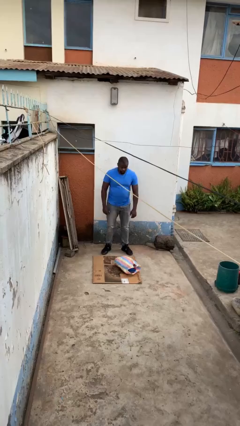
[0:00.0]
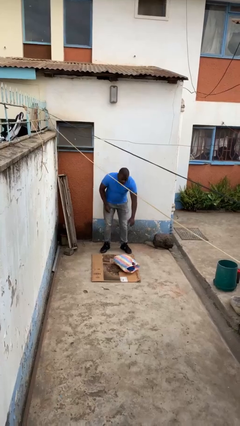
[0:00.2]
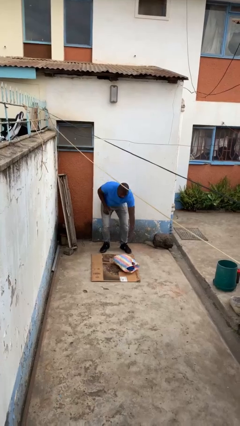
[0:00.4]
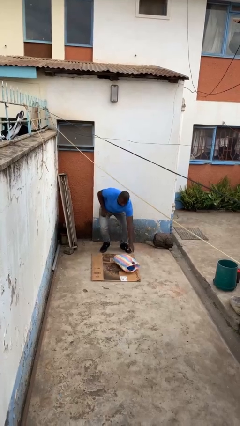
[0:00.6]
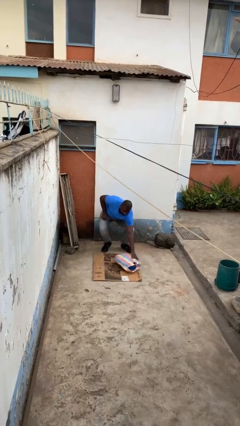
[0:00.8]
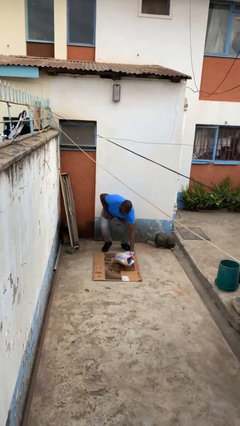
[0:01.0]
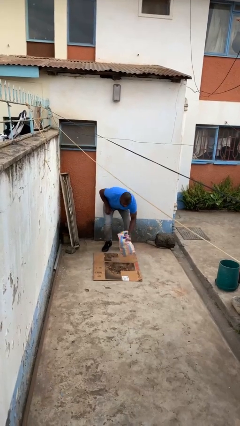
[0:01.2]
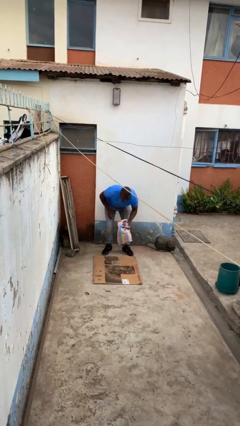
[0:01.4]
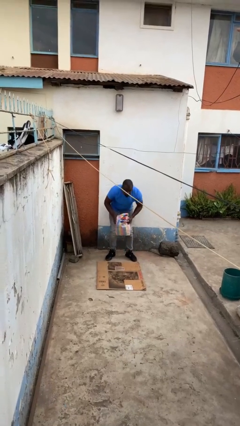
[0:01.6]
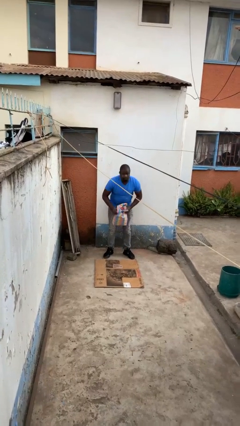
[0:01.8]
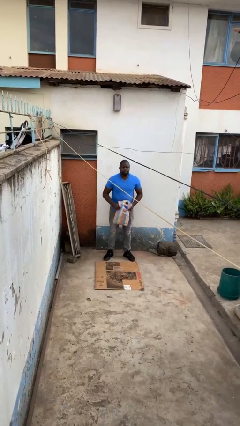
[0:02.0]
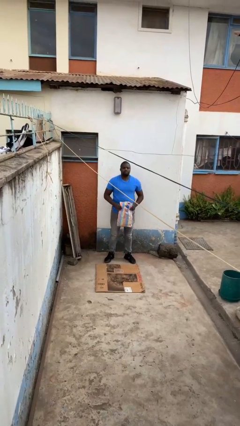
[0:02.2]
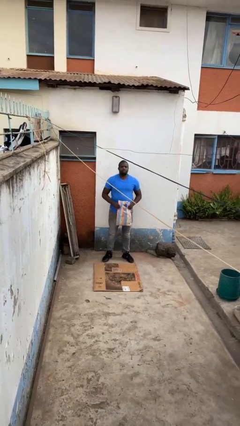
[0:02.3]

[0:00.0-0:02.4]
person picks up object from floor

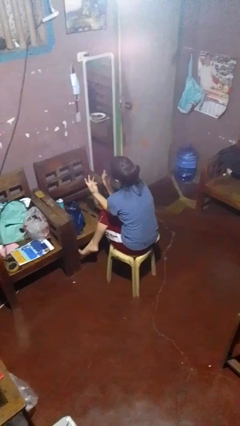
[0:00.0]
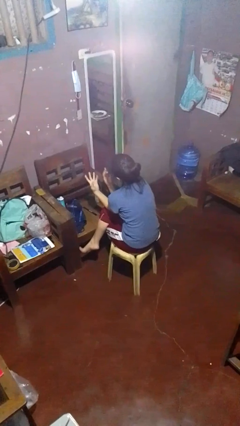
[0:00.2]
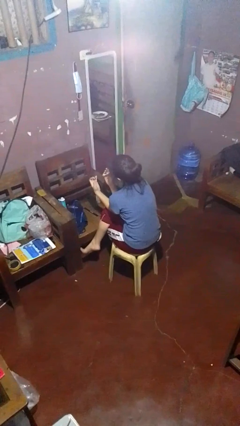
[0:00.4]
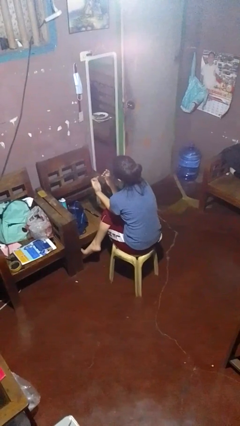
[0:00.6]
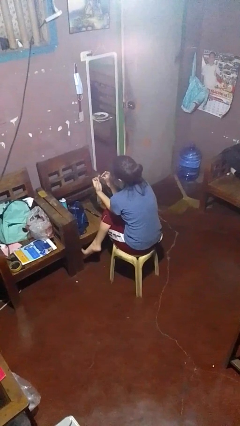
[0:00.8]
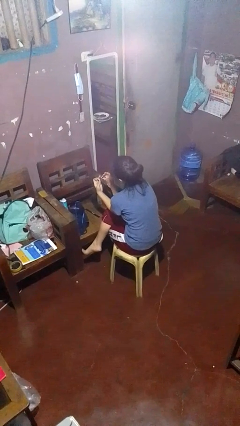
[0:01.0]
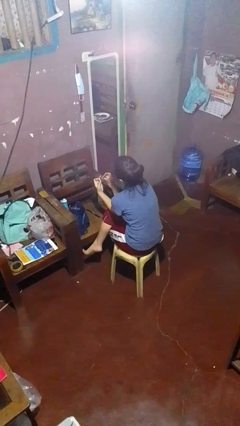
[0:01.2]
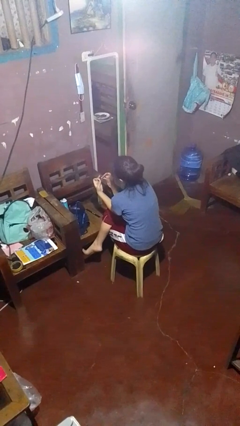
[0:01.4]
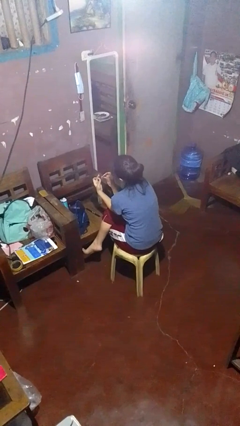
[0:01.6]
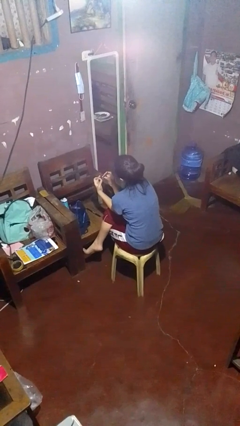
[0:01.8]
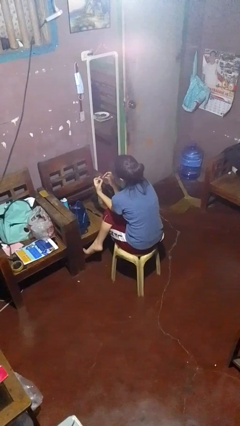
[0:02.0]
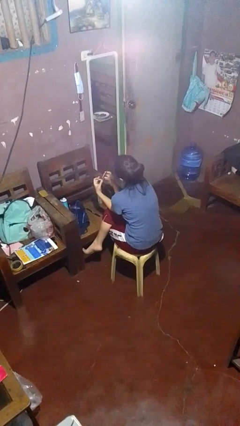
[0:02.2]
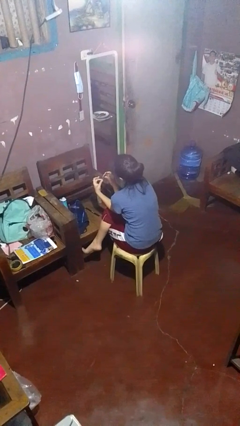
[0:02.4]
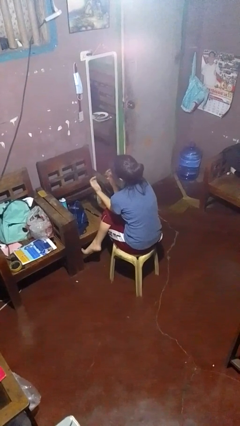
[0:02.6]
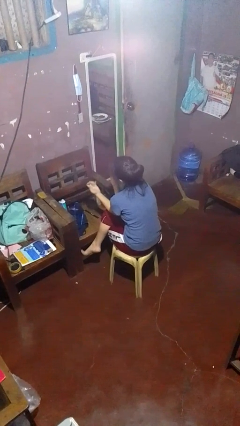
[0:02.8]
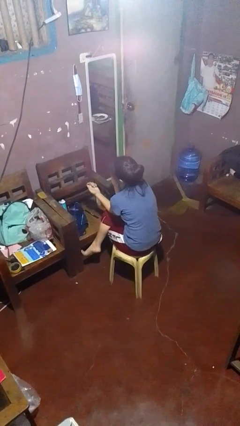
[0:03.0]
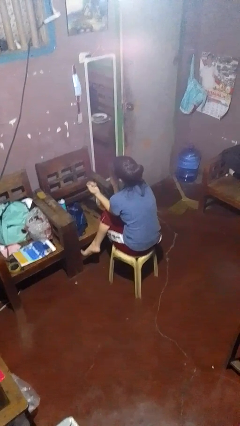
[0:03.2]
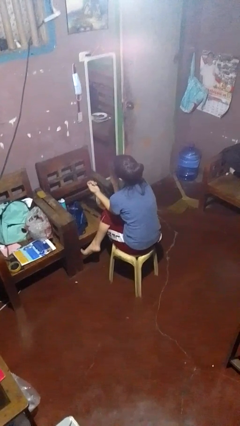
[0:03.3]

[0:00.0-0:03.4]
person clips fingernails

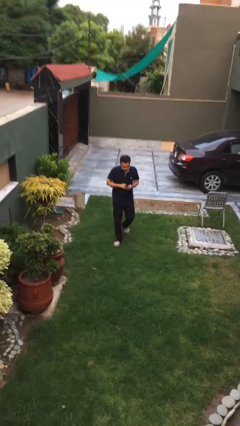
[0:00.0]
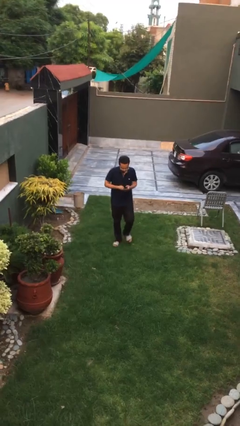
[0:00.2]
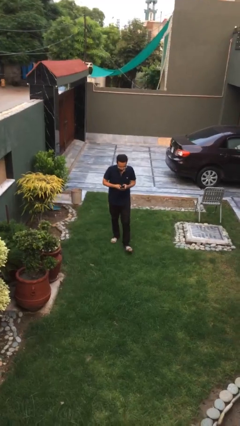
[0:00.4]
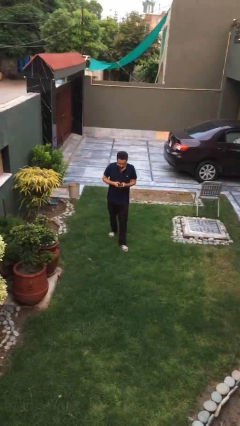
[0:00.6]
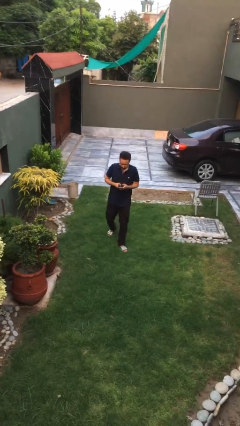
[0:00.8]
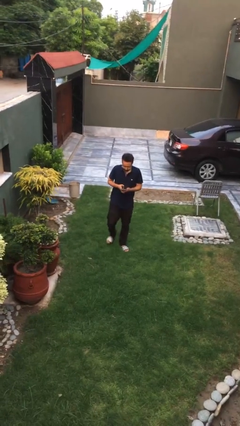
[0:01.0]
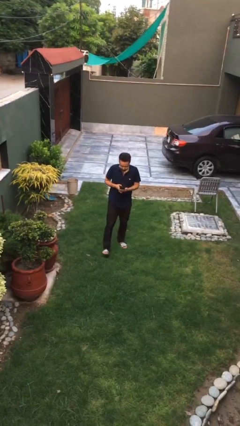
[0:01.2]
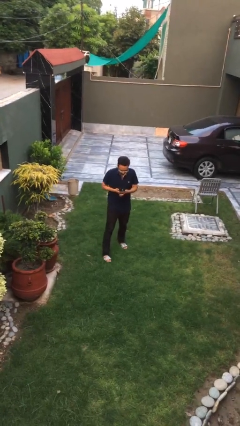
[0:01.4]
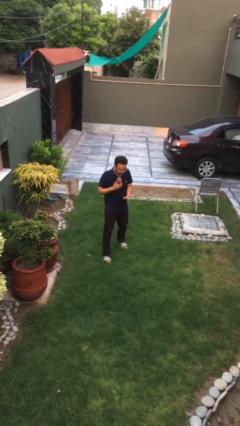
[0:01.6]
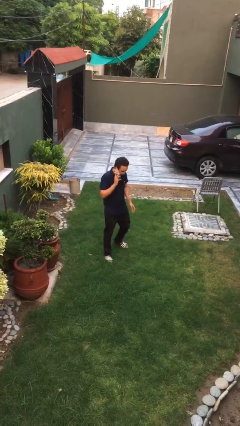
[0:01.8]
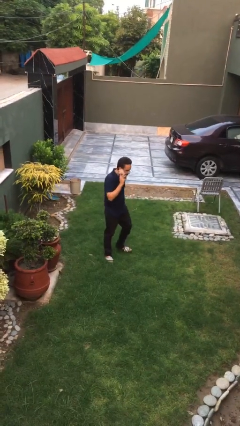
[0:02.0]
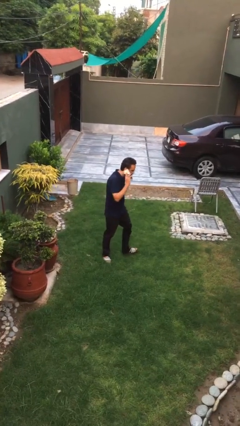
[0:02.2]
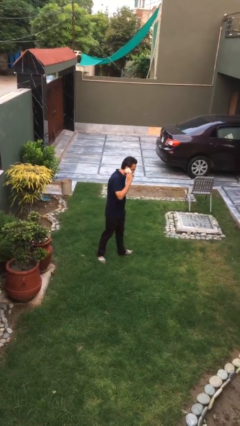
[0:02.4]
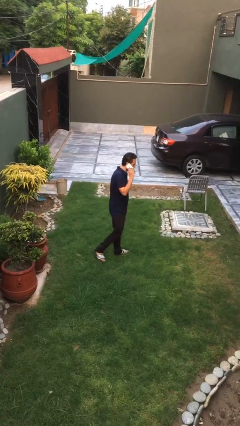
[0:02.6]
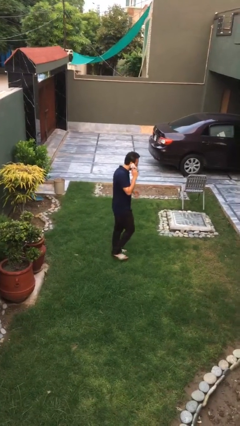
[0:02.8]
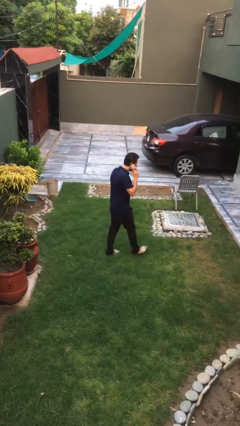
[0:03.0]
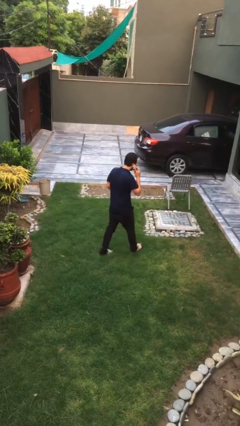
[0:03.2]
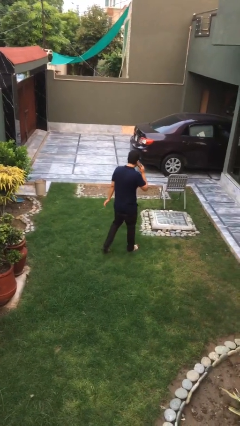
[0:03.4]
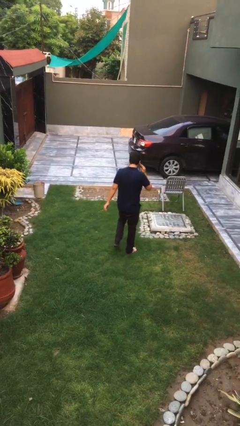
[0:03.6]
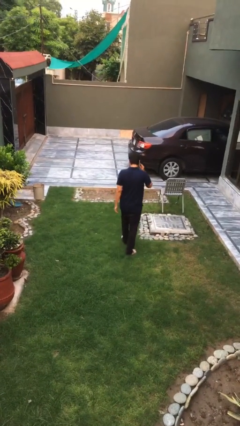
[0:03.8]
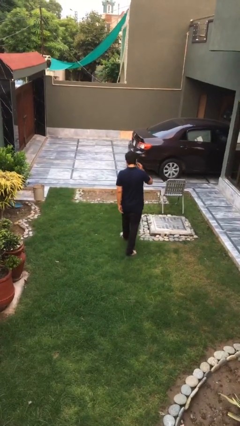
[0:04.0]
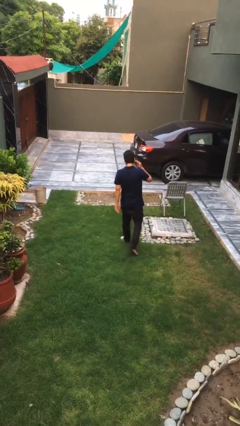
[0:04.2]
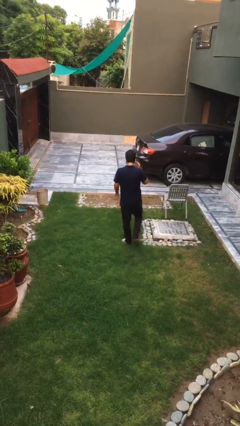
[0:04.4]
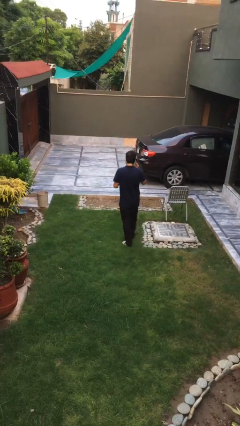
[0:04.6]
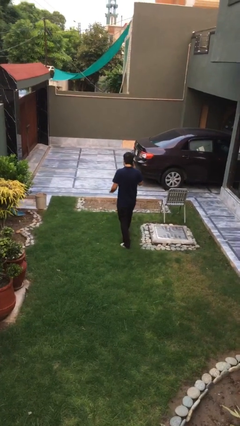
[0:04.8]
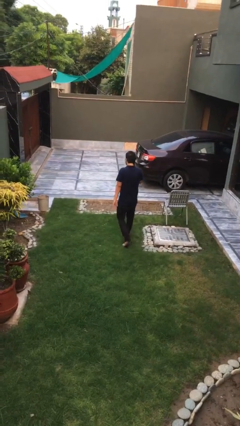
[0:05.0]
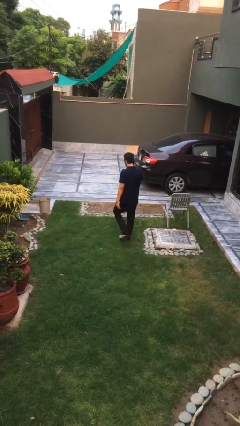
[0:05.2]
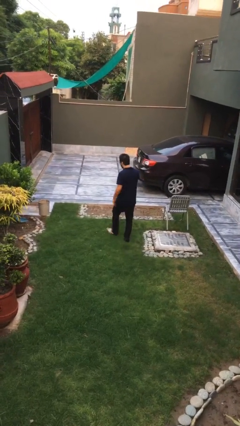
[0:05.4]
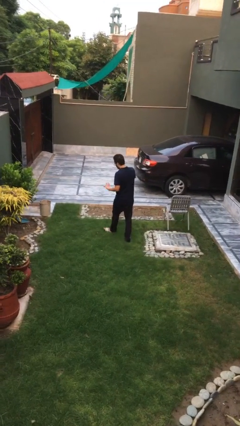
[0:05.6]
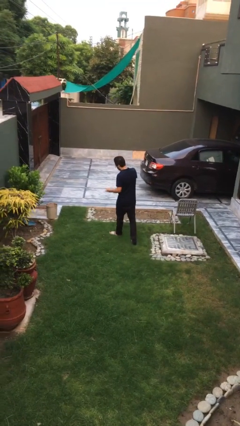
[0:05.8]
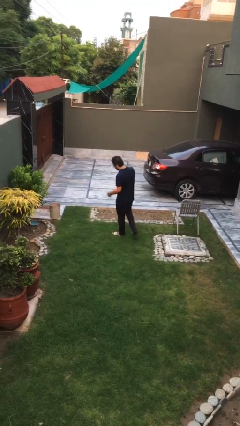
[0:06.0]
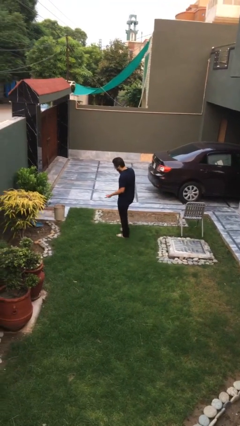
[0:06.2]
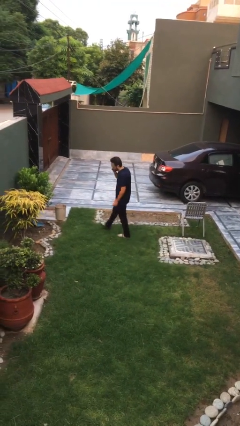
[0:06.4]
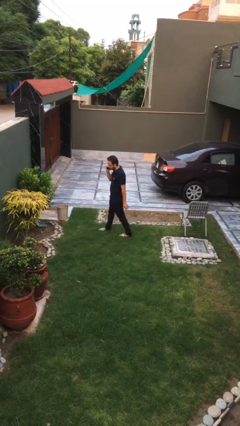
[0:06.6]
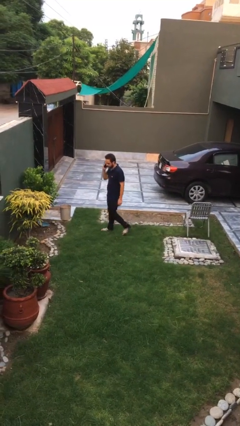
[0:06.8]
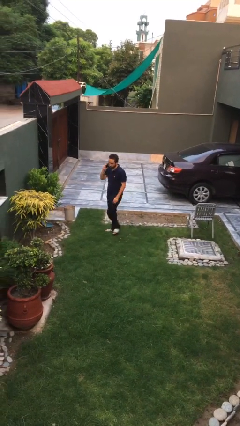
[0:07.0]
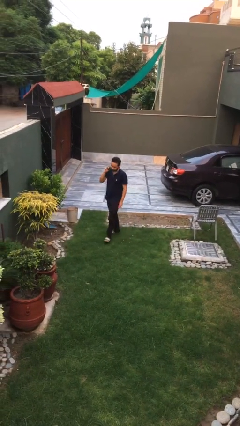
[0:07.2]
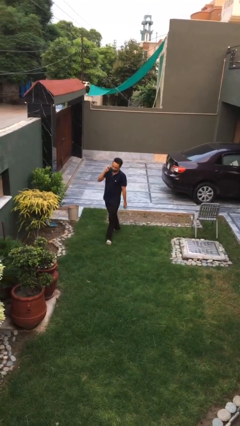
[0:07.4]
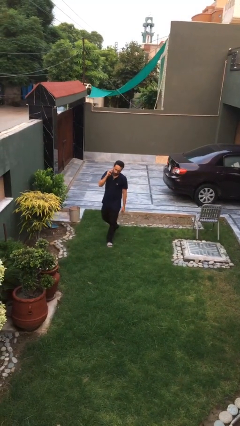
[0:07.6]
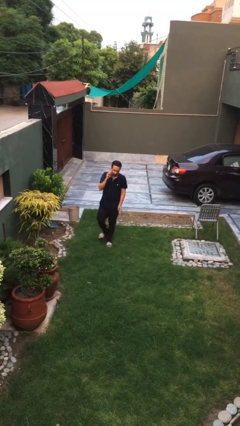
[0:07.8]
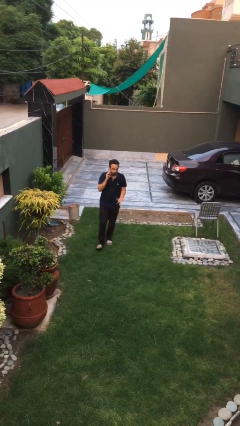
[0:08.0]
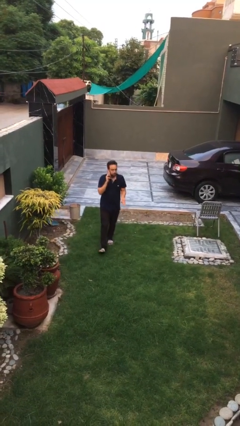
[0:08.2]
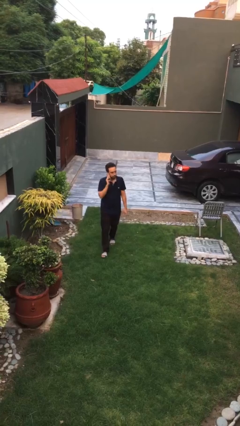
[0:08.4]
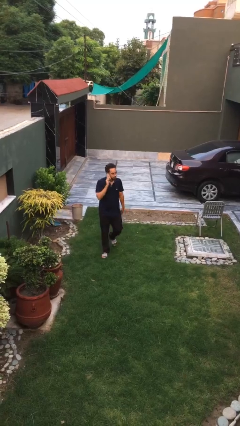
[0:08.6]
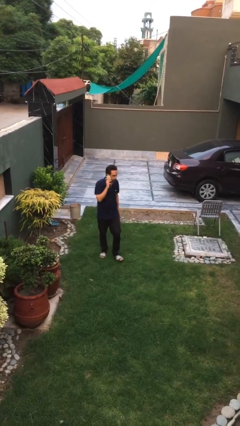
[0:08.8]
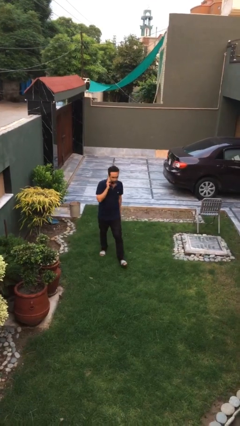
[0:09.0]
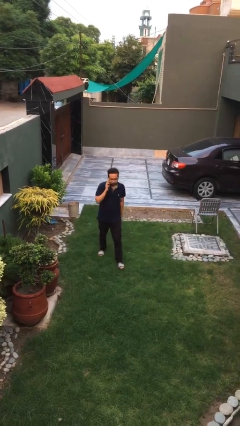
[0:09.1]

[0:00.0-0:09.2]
person talks on phone

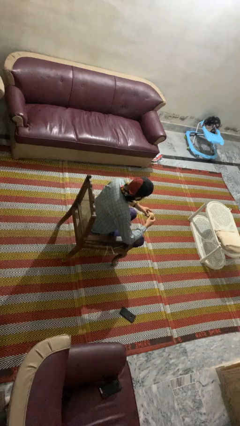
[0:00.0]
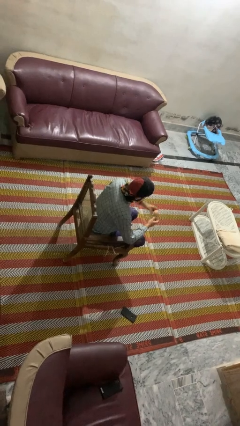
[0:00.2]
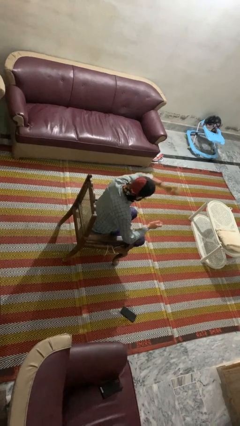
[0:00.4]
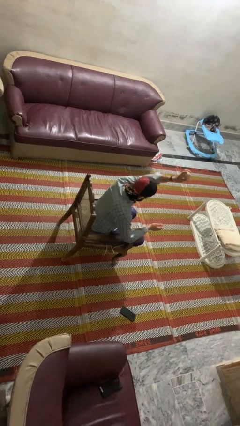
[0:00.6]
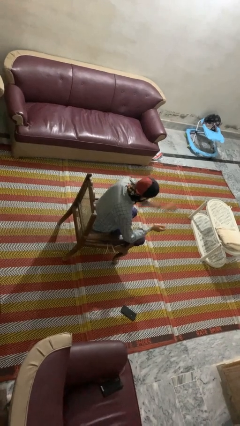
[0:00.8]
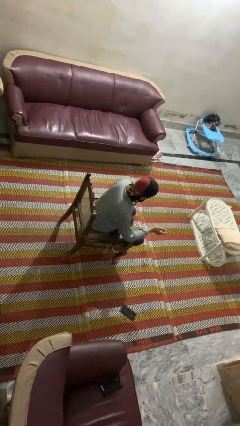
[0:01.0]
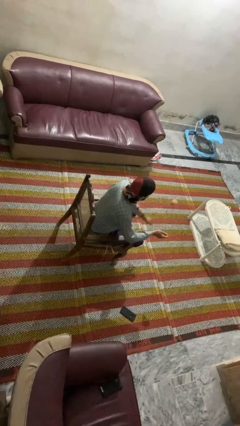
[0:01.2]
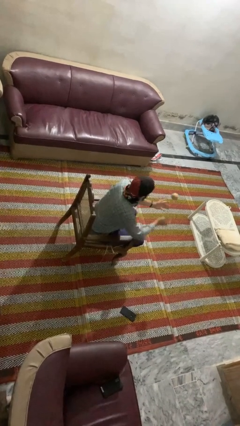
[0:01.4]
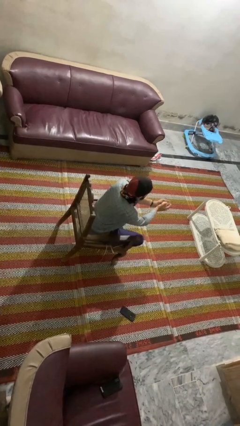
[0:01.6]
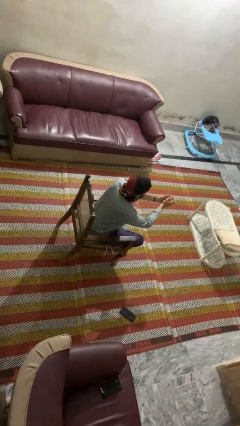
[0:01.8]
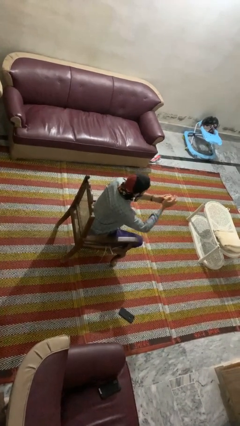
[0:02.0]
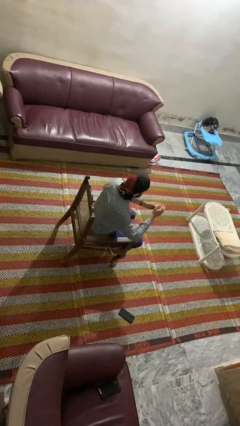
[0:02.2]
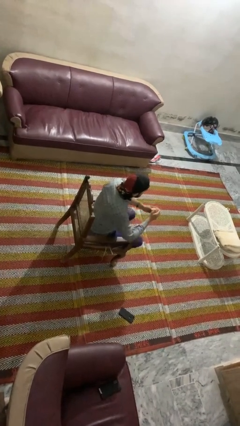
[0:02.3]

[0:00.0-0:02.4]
person bounces ball on floor

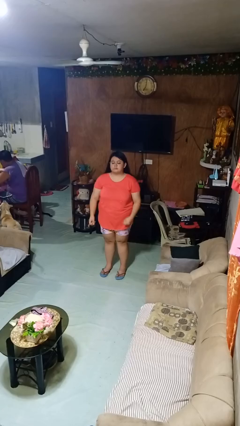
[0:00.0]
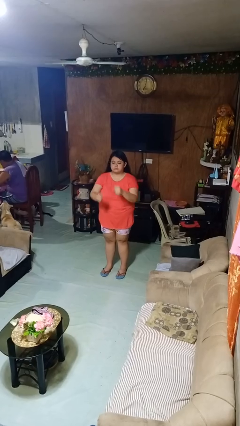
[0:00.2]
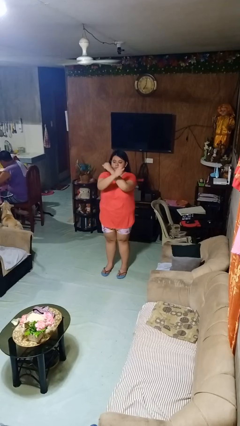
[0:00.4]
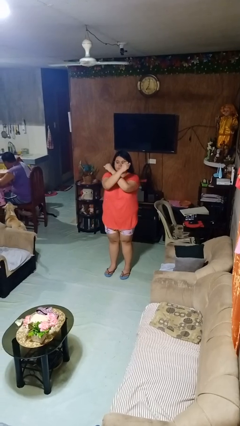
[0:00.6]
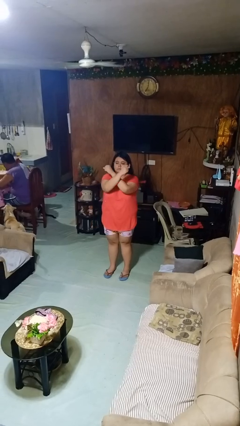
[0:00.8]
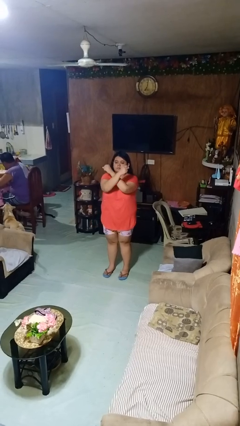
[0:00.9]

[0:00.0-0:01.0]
person gestures arms x
